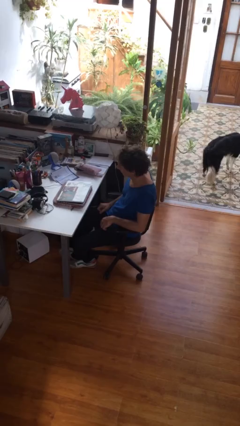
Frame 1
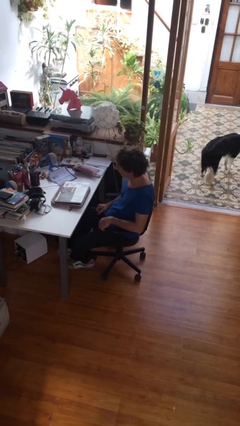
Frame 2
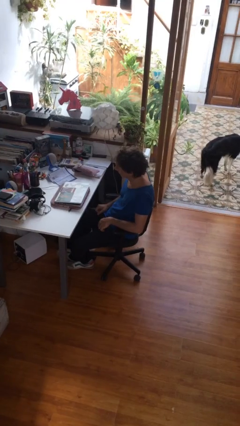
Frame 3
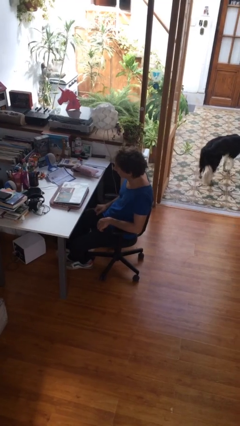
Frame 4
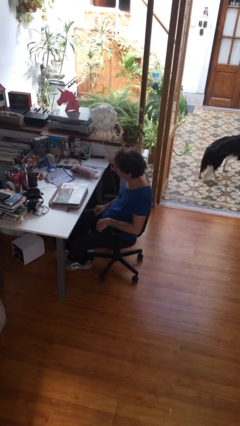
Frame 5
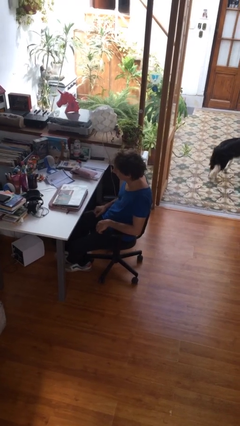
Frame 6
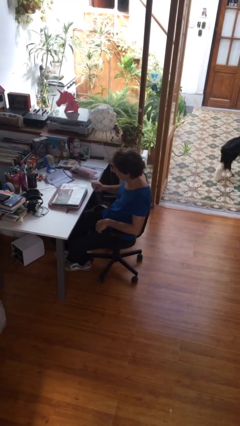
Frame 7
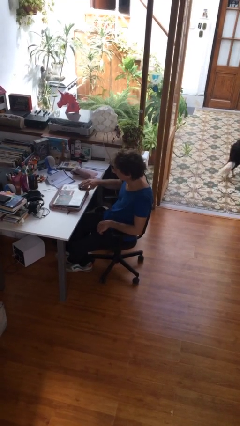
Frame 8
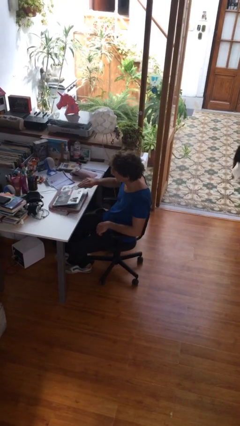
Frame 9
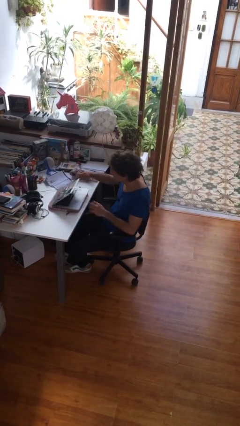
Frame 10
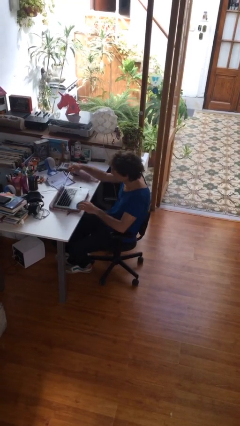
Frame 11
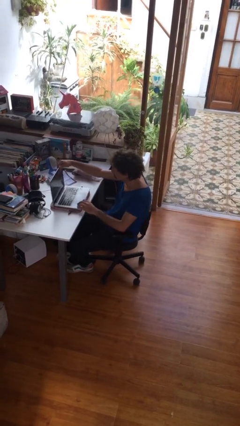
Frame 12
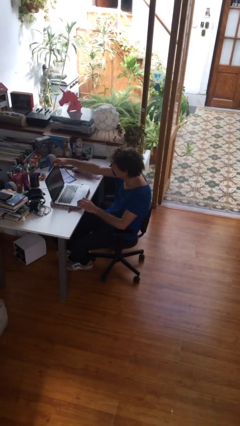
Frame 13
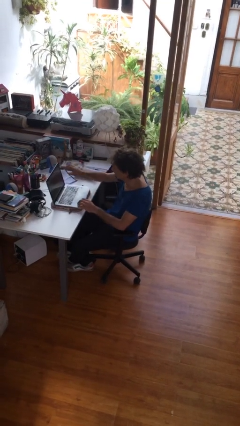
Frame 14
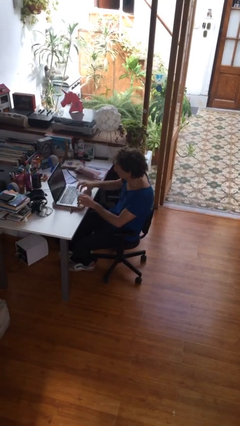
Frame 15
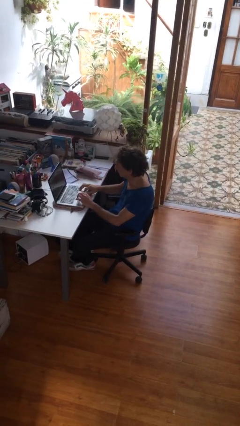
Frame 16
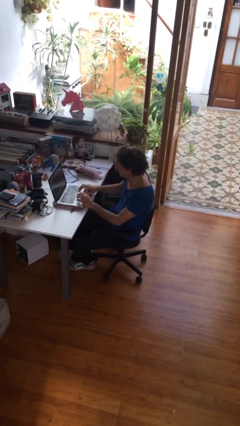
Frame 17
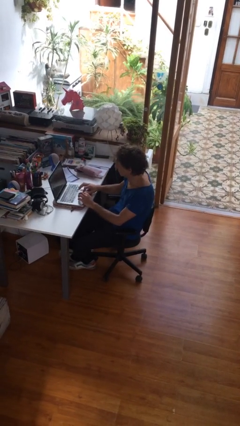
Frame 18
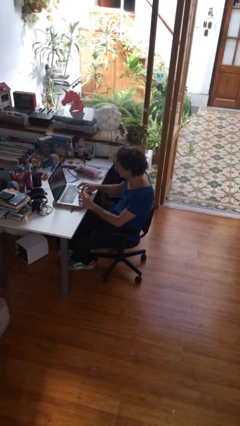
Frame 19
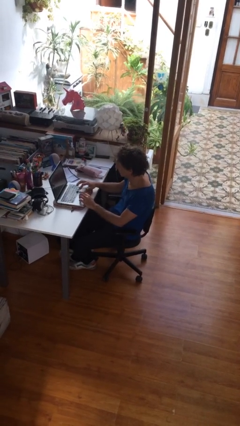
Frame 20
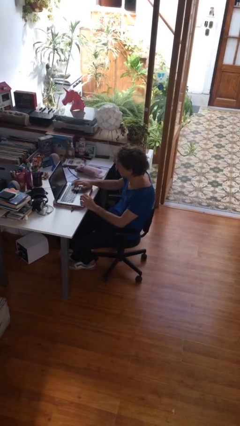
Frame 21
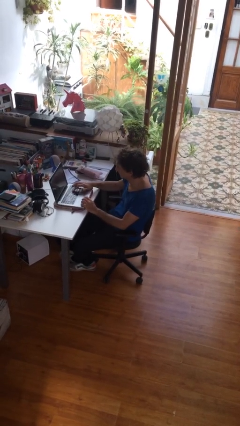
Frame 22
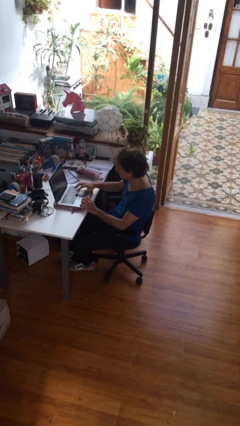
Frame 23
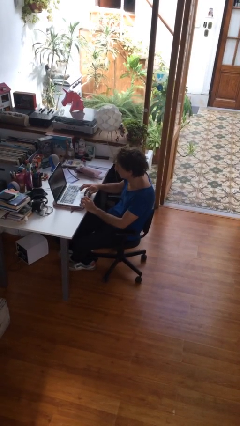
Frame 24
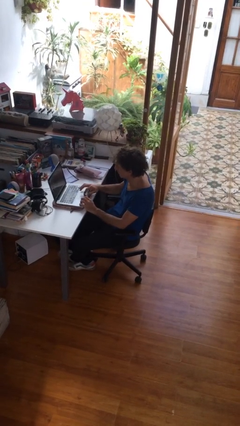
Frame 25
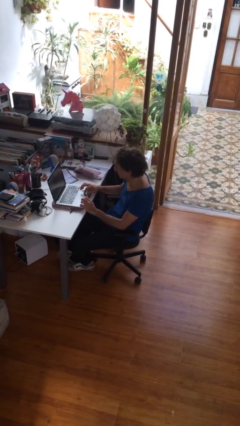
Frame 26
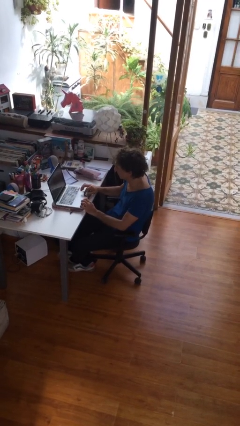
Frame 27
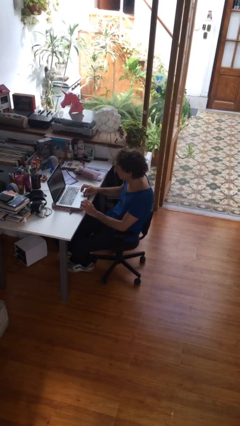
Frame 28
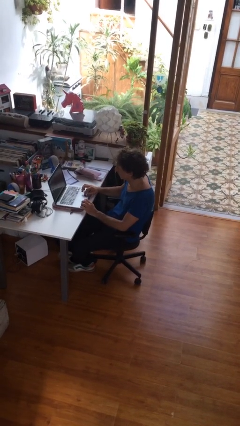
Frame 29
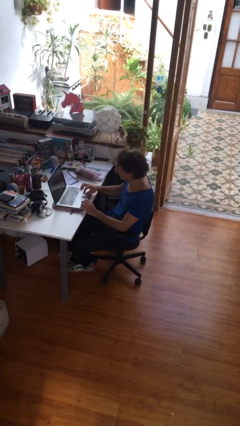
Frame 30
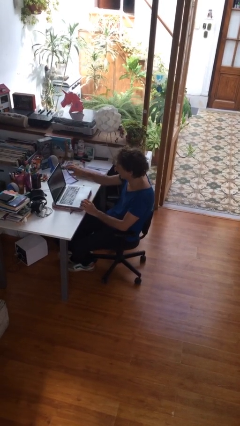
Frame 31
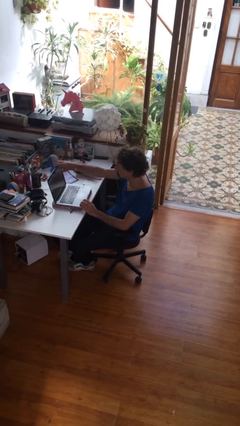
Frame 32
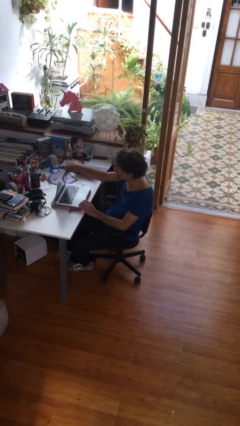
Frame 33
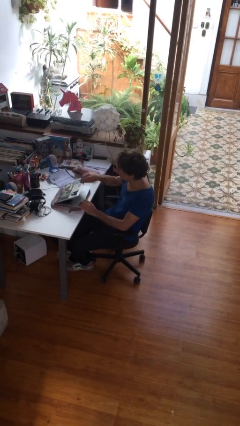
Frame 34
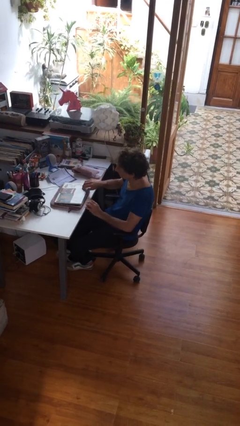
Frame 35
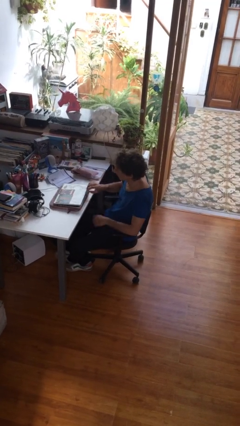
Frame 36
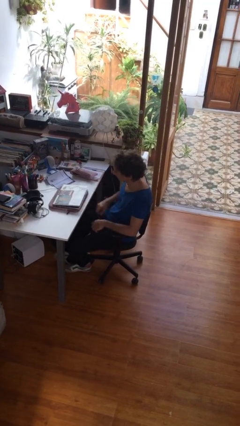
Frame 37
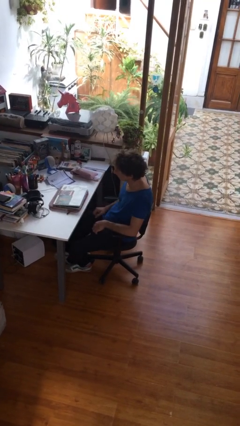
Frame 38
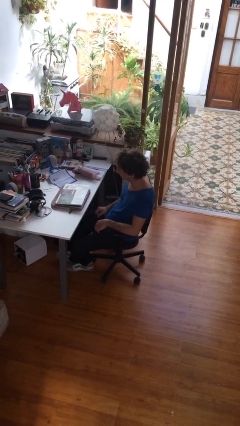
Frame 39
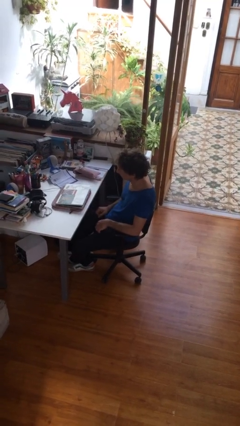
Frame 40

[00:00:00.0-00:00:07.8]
person interacts with laptop

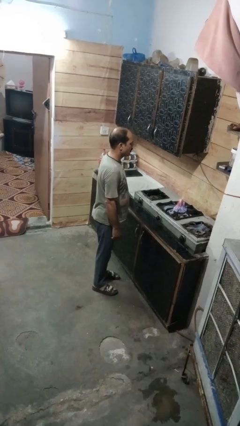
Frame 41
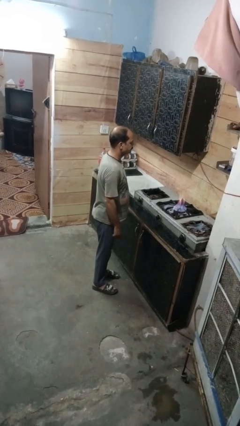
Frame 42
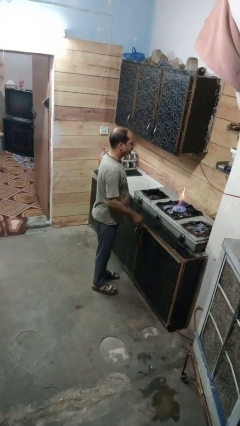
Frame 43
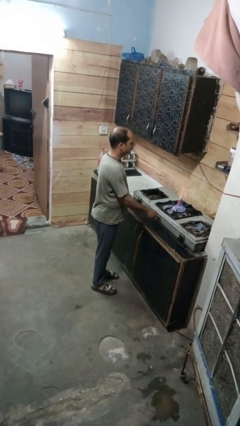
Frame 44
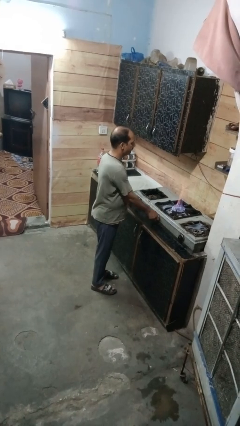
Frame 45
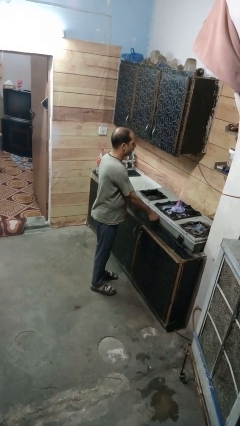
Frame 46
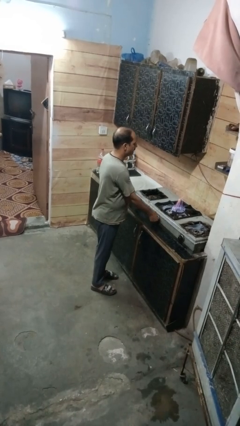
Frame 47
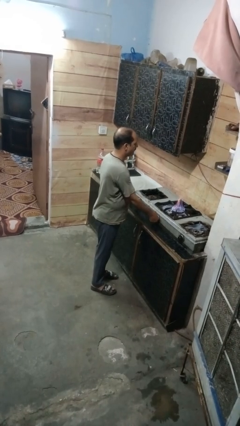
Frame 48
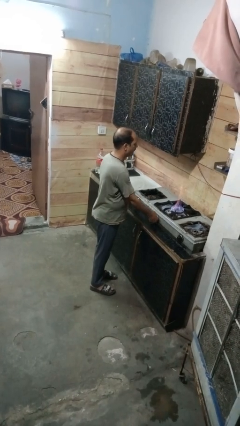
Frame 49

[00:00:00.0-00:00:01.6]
person turns off stovetop

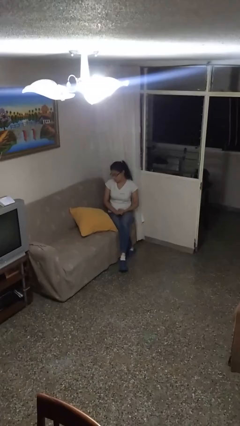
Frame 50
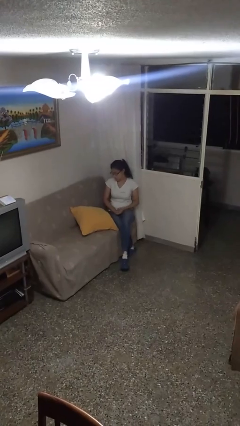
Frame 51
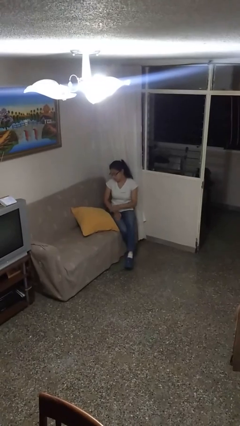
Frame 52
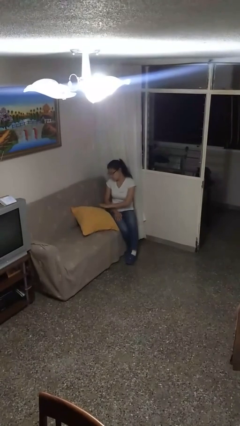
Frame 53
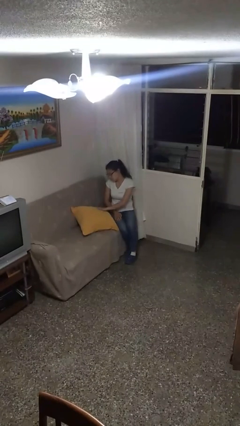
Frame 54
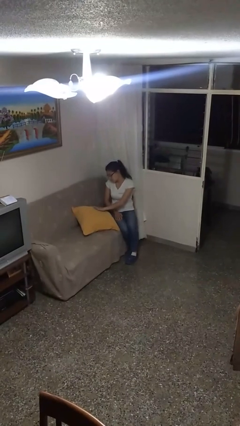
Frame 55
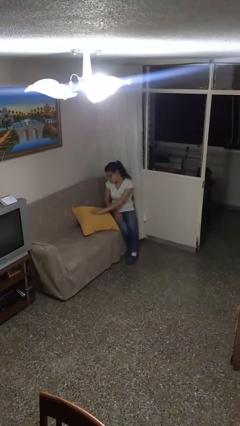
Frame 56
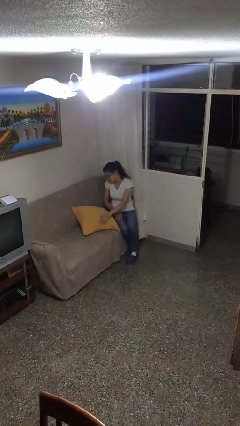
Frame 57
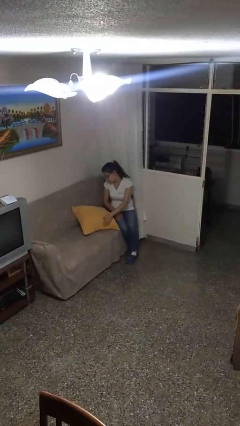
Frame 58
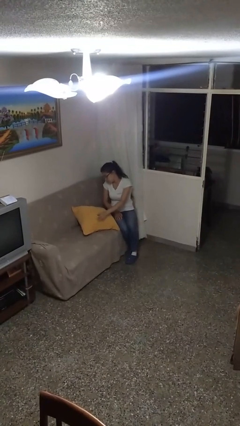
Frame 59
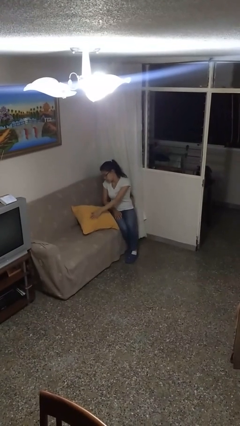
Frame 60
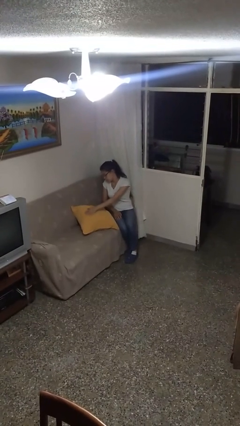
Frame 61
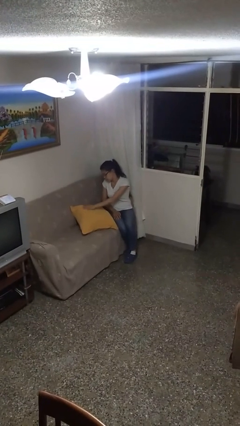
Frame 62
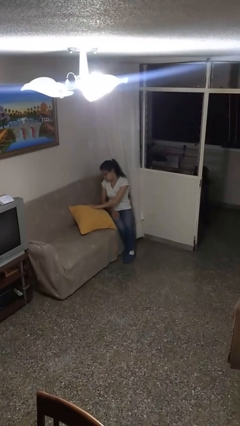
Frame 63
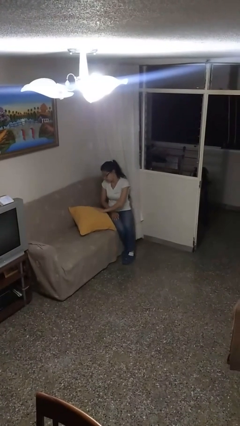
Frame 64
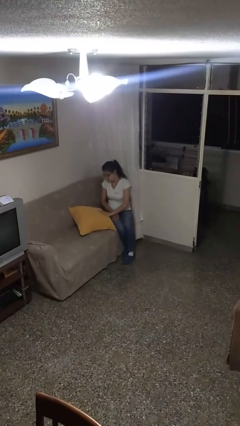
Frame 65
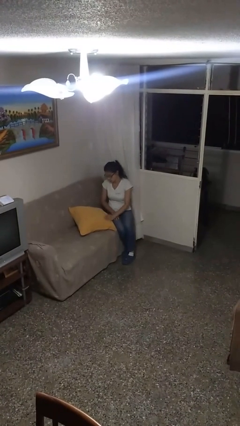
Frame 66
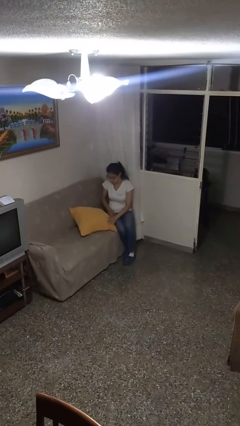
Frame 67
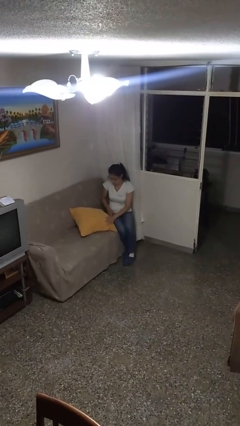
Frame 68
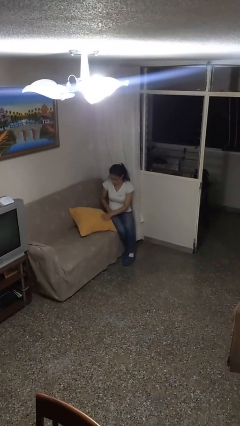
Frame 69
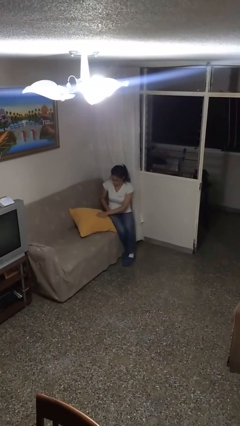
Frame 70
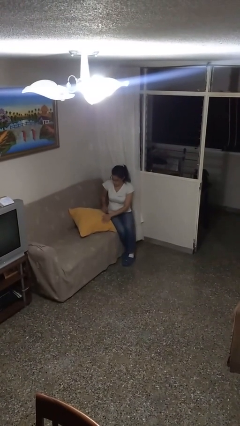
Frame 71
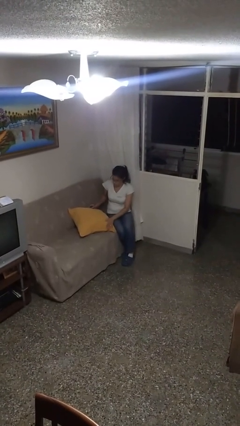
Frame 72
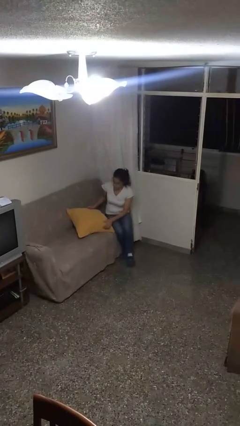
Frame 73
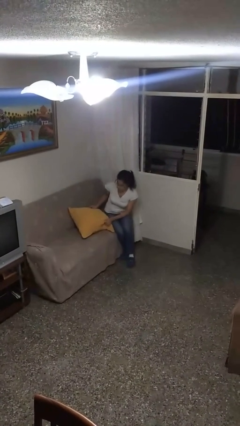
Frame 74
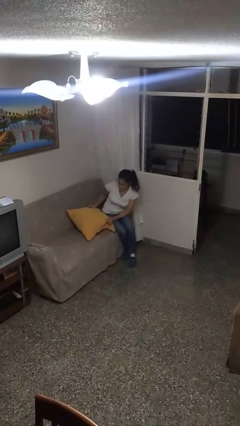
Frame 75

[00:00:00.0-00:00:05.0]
person waves hand over object

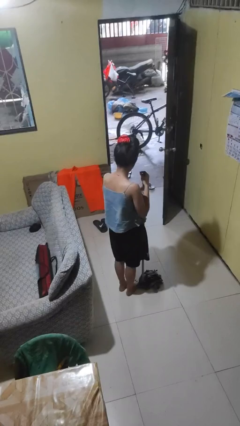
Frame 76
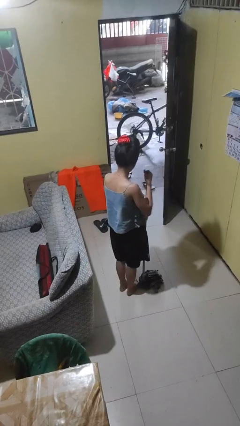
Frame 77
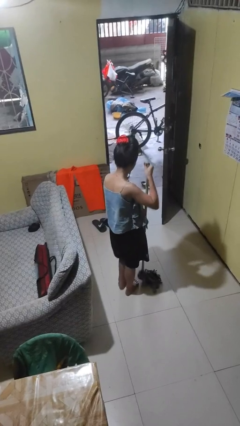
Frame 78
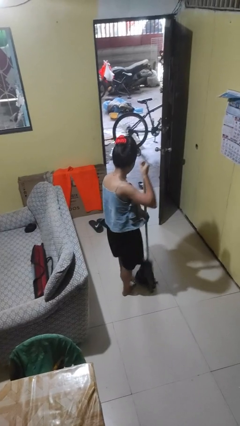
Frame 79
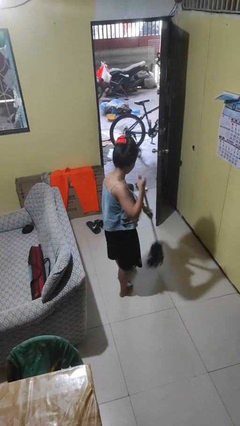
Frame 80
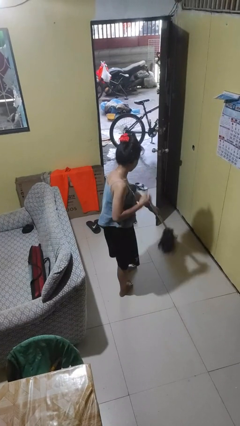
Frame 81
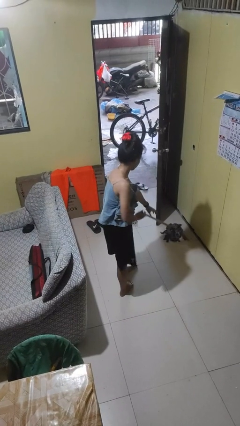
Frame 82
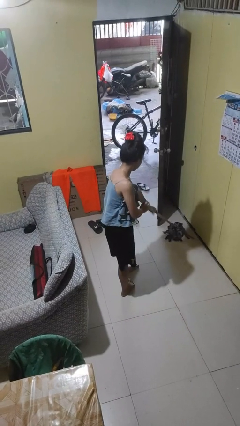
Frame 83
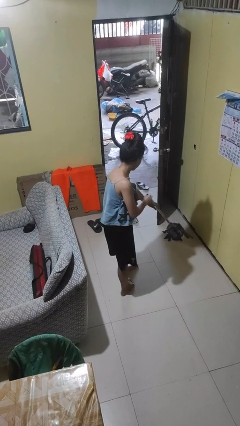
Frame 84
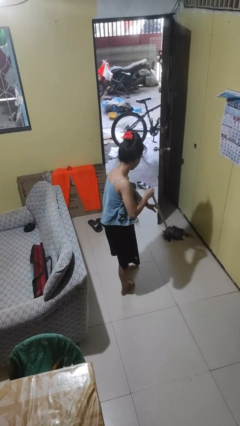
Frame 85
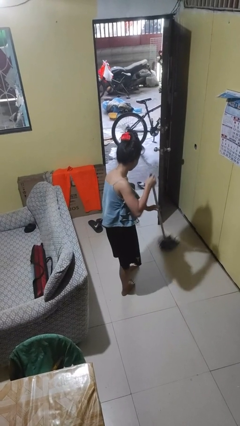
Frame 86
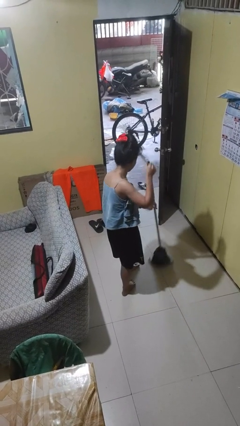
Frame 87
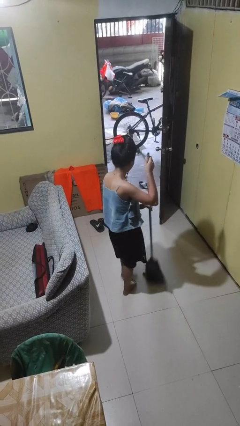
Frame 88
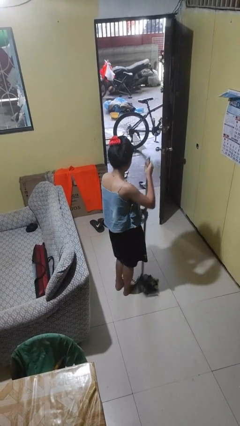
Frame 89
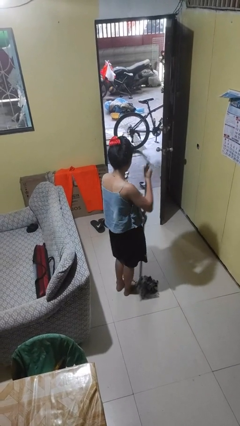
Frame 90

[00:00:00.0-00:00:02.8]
person mops

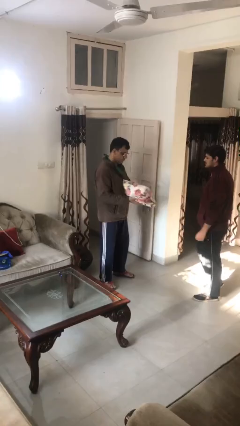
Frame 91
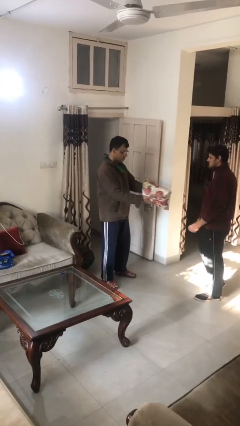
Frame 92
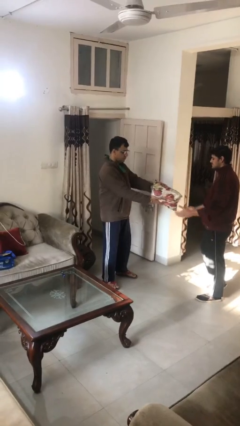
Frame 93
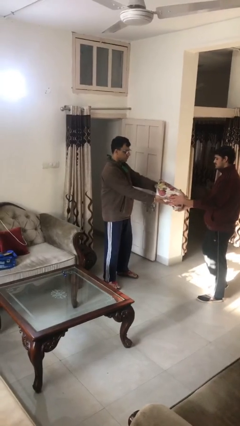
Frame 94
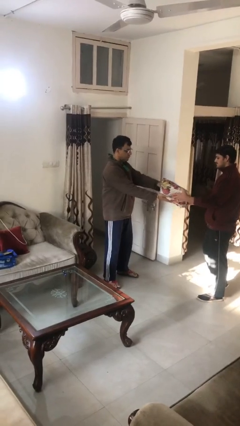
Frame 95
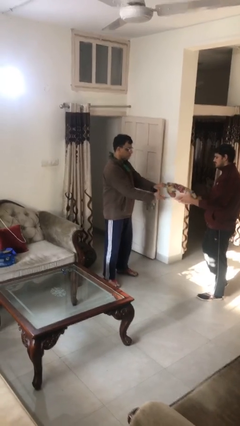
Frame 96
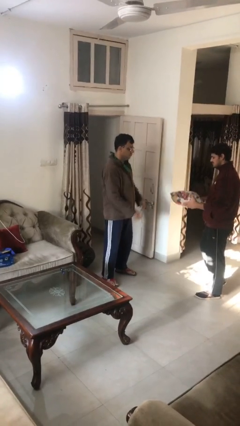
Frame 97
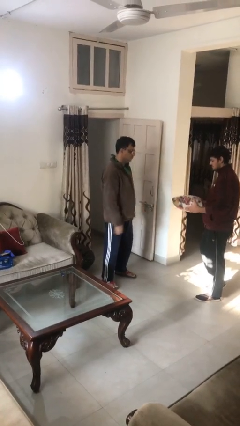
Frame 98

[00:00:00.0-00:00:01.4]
person transfers object to person
